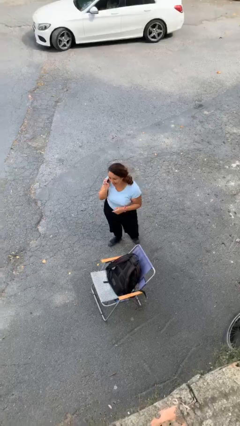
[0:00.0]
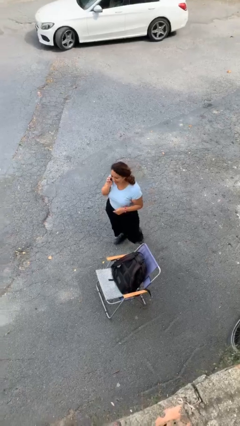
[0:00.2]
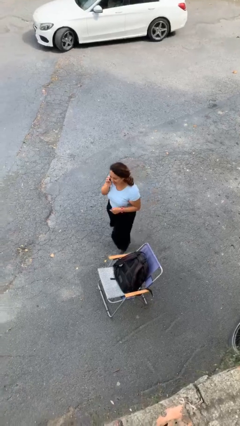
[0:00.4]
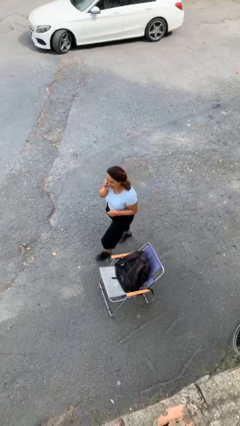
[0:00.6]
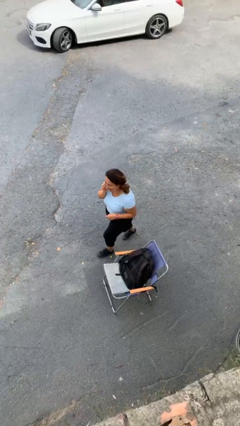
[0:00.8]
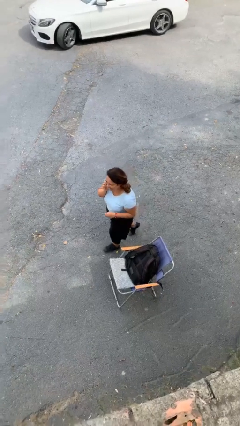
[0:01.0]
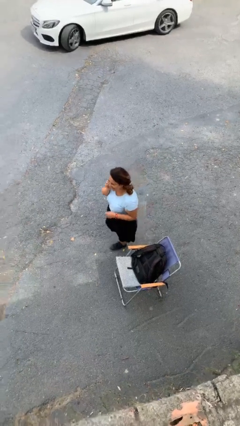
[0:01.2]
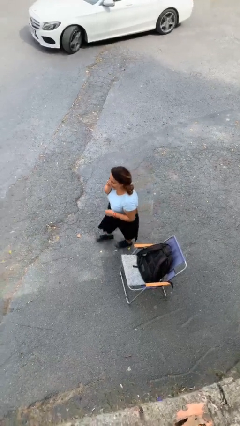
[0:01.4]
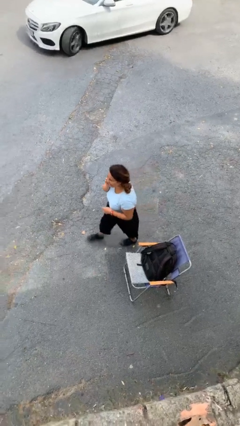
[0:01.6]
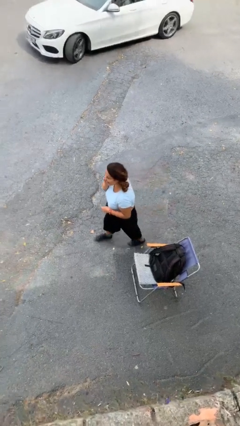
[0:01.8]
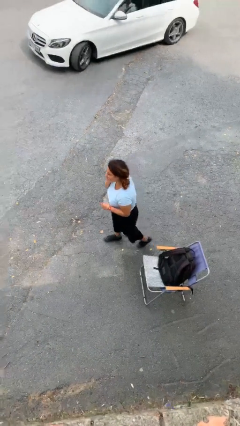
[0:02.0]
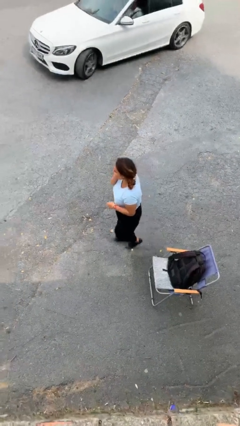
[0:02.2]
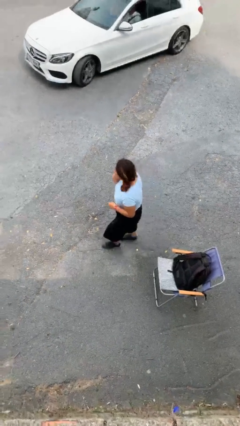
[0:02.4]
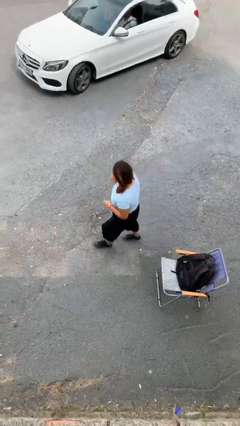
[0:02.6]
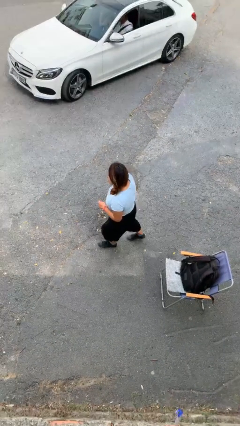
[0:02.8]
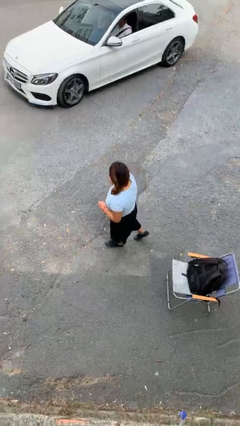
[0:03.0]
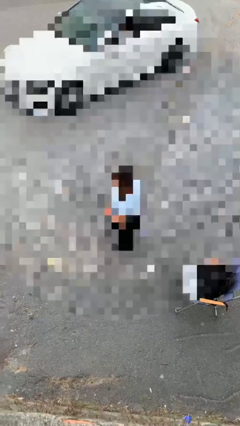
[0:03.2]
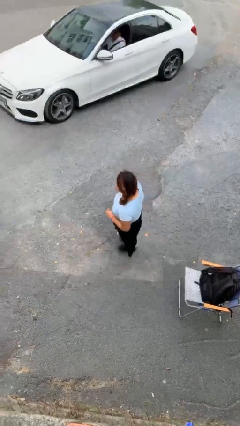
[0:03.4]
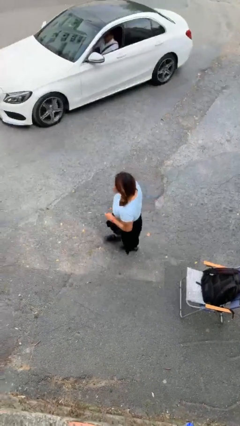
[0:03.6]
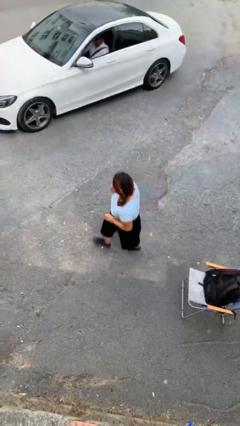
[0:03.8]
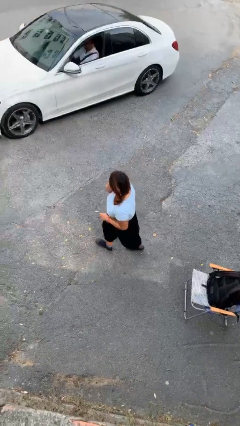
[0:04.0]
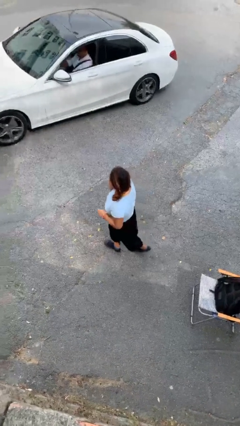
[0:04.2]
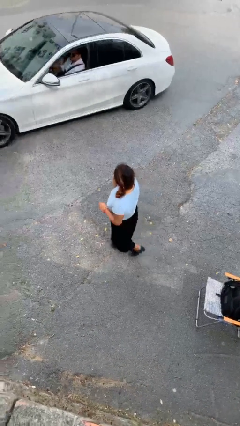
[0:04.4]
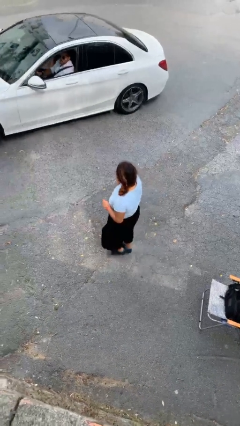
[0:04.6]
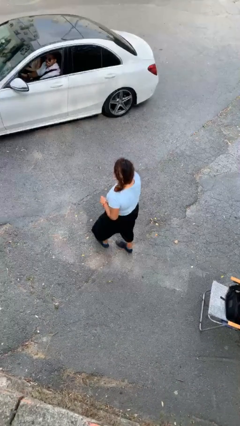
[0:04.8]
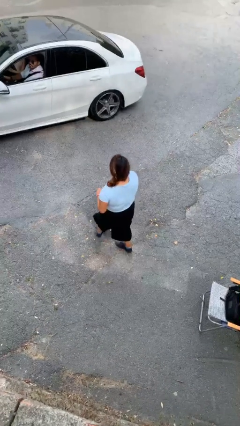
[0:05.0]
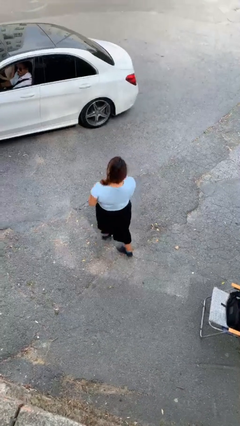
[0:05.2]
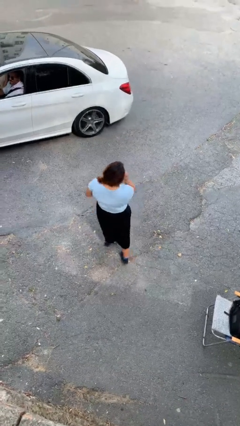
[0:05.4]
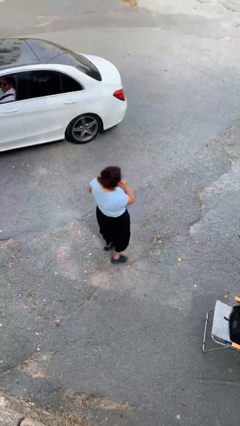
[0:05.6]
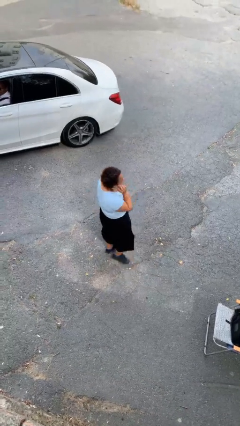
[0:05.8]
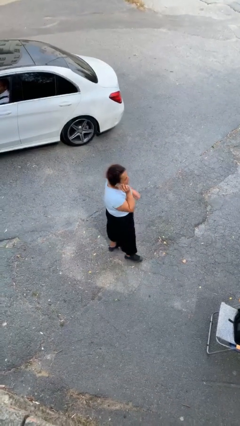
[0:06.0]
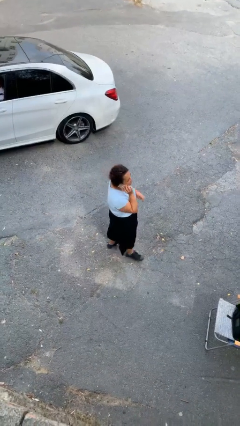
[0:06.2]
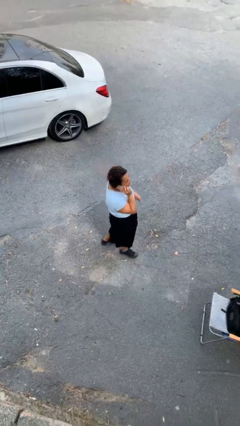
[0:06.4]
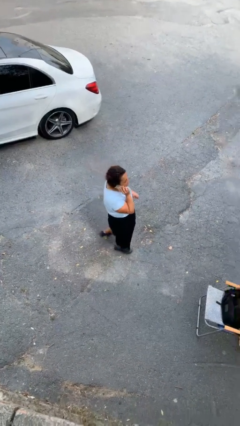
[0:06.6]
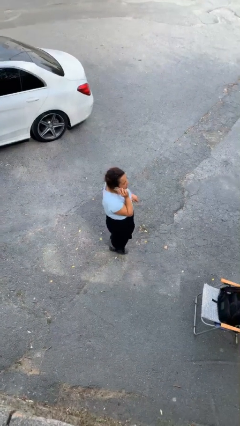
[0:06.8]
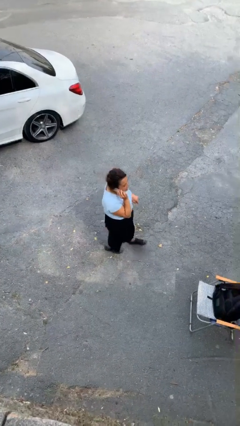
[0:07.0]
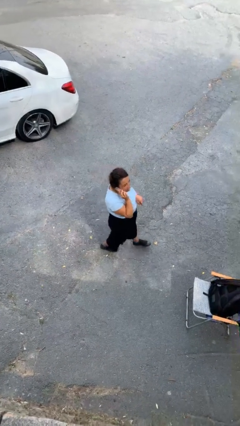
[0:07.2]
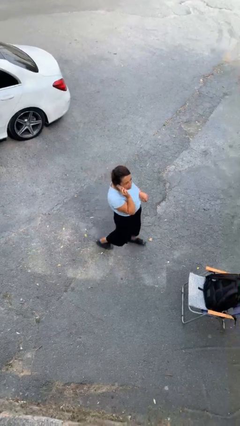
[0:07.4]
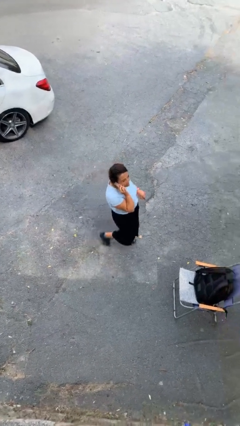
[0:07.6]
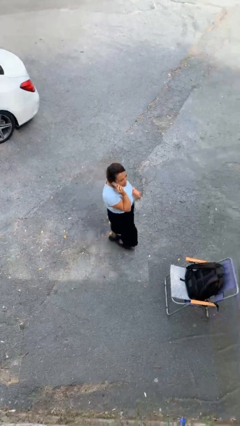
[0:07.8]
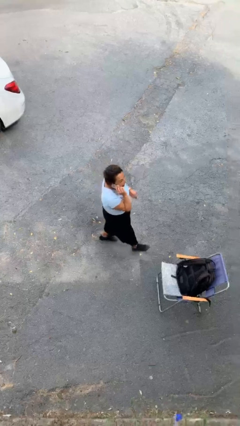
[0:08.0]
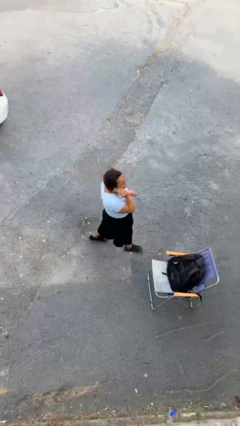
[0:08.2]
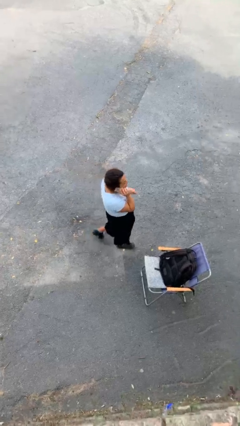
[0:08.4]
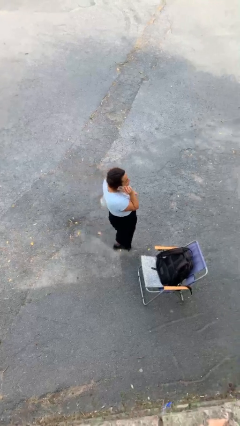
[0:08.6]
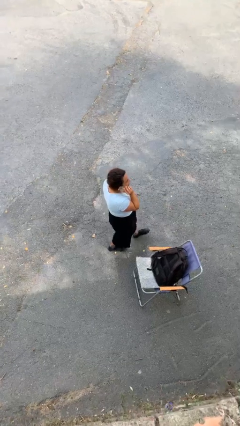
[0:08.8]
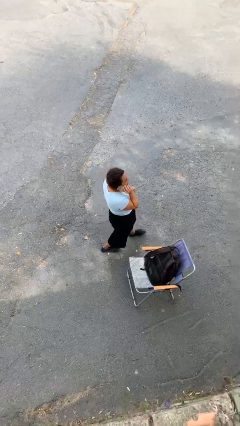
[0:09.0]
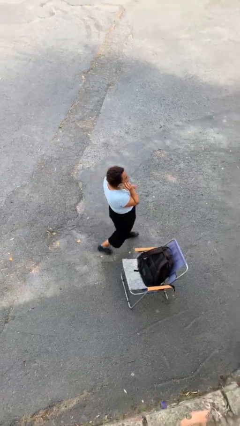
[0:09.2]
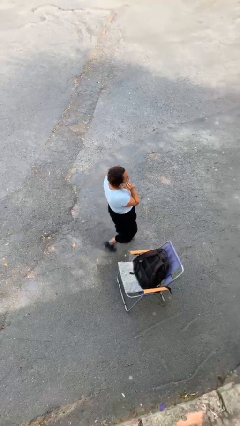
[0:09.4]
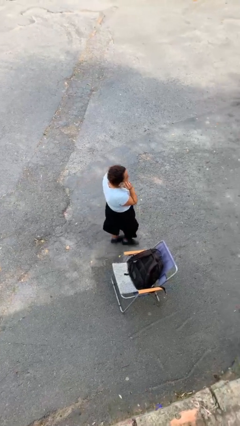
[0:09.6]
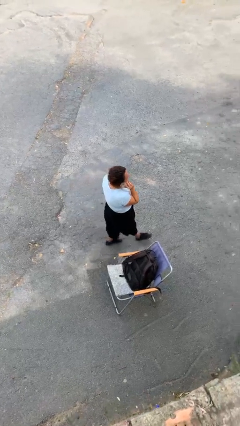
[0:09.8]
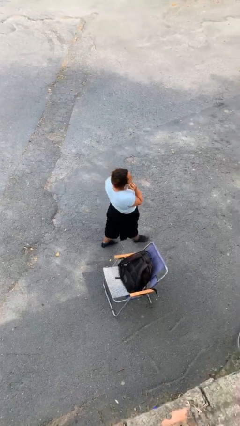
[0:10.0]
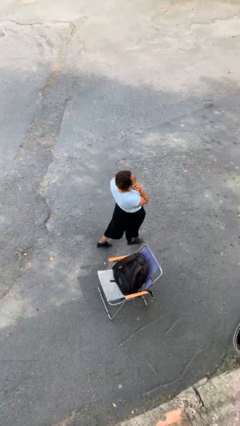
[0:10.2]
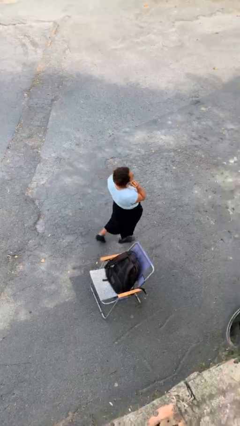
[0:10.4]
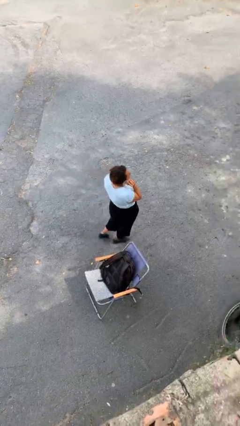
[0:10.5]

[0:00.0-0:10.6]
person talks on phone

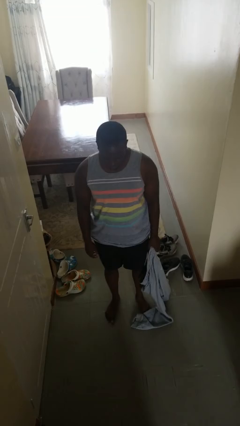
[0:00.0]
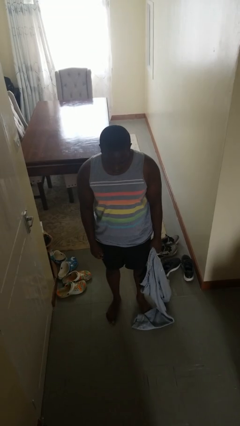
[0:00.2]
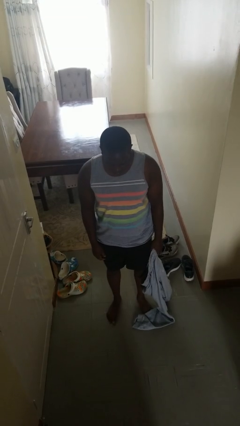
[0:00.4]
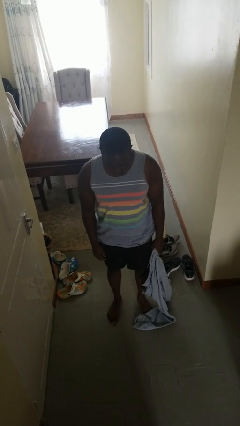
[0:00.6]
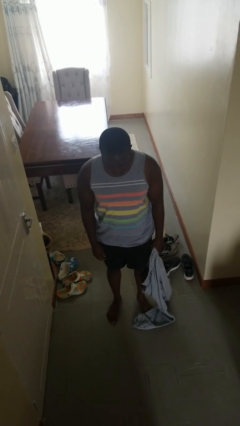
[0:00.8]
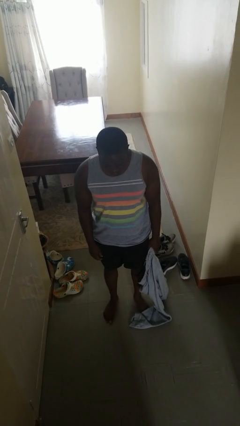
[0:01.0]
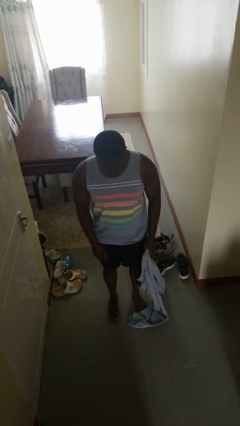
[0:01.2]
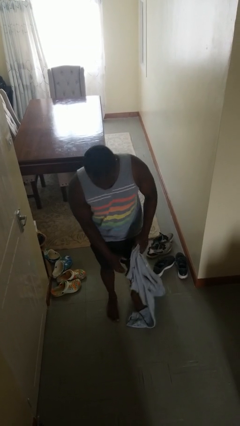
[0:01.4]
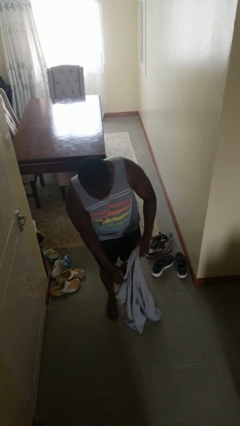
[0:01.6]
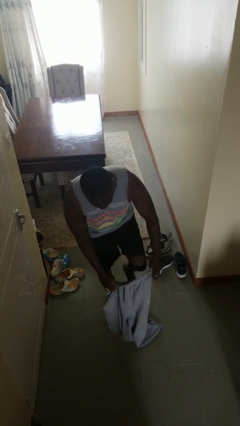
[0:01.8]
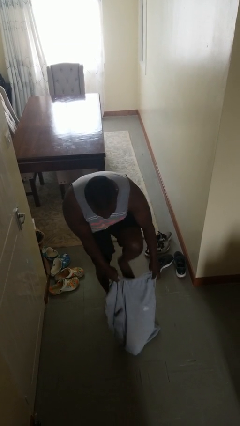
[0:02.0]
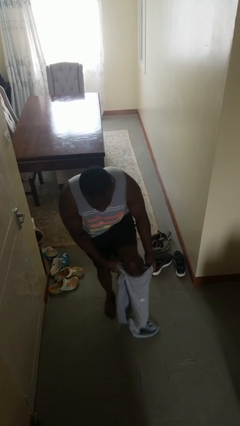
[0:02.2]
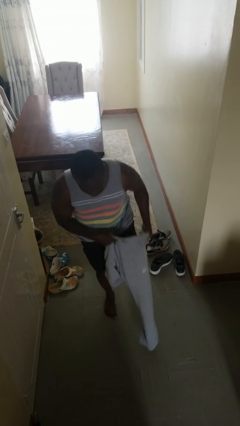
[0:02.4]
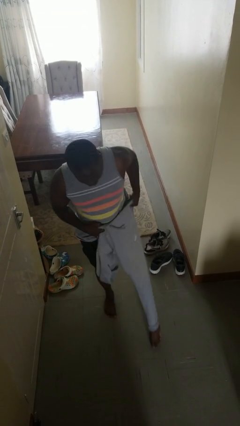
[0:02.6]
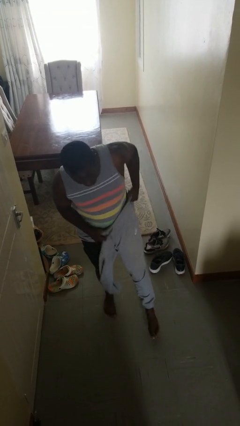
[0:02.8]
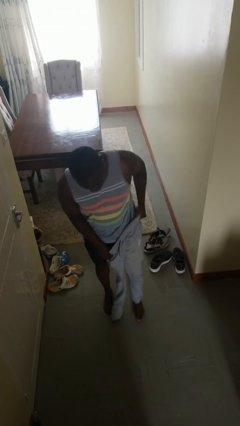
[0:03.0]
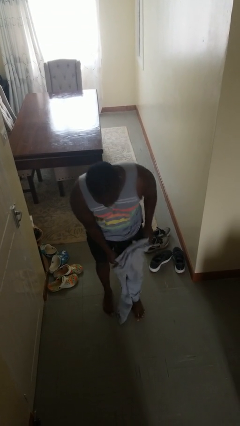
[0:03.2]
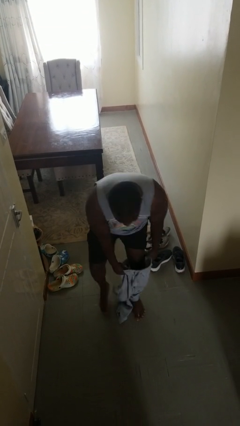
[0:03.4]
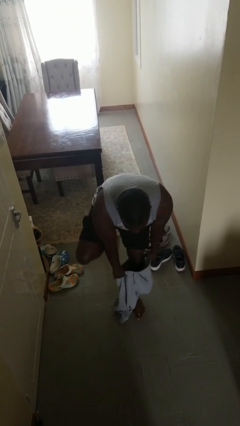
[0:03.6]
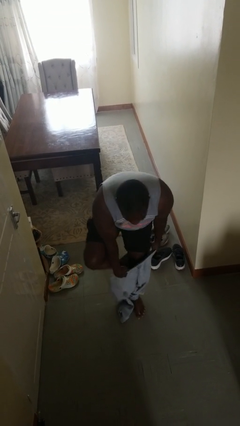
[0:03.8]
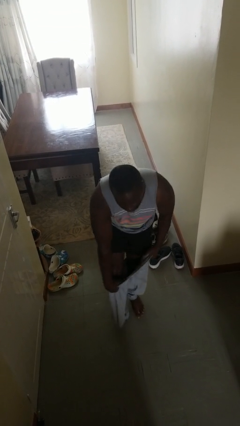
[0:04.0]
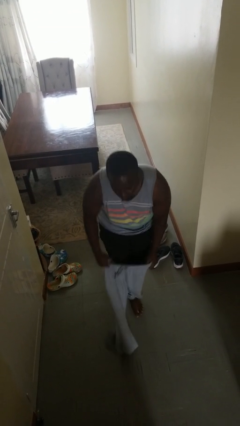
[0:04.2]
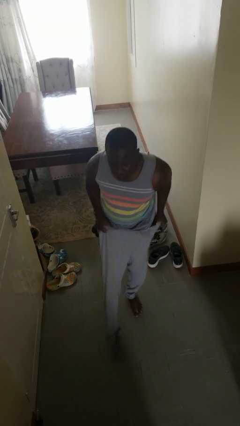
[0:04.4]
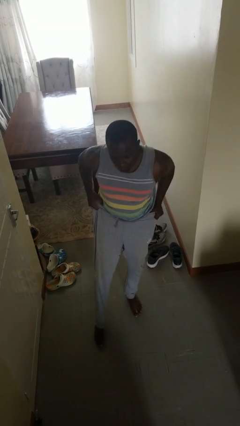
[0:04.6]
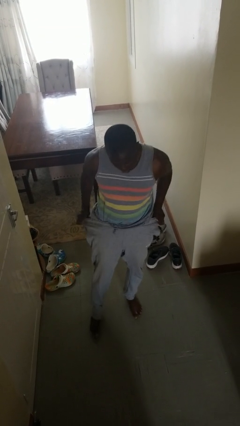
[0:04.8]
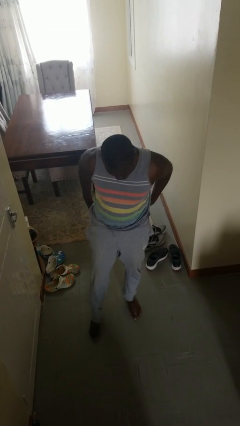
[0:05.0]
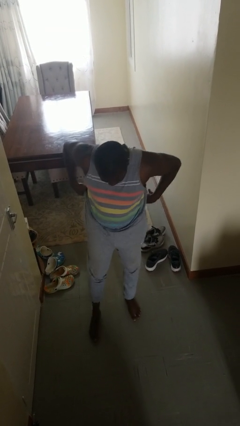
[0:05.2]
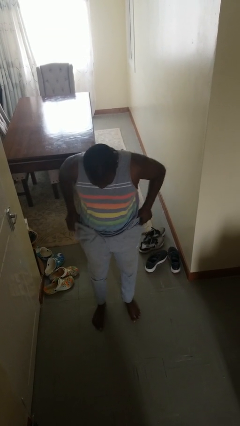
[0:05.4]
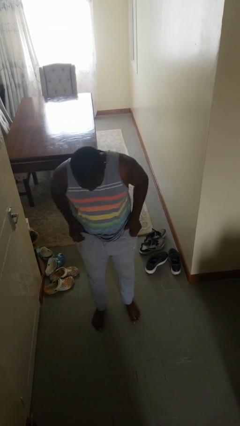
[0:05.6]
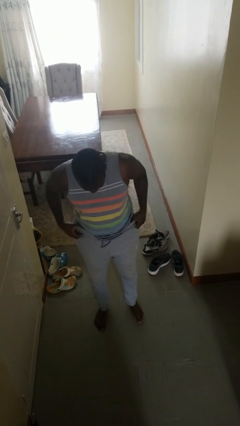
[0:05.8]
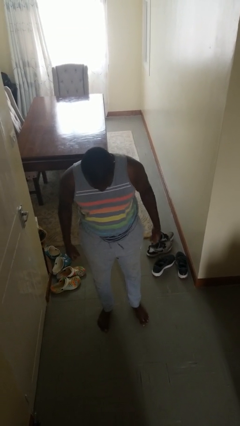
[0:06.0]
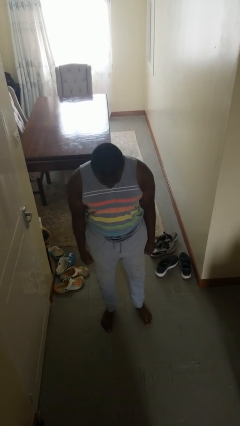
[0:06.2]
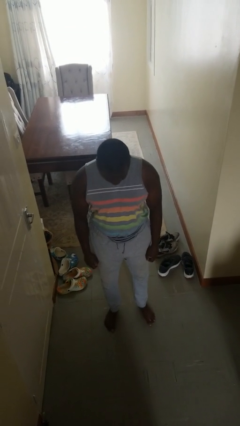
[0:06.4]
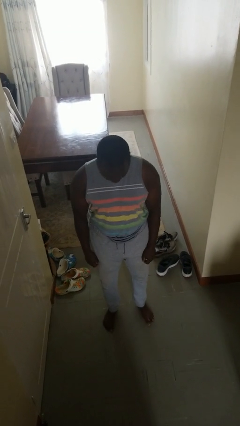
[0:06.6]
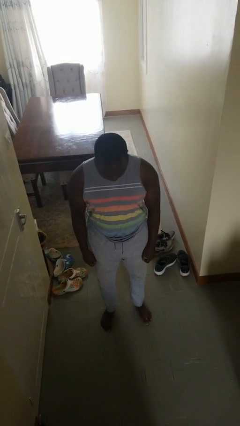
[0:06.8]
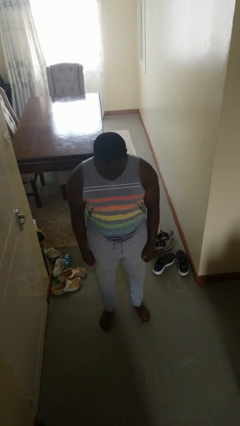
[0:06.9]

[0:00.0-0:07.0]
person puts on pants

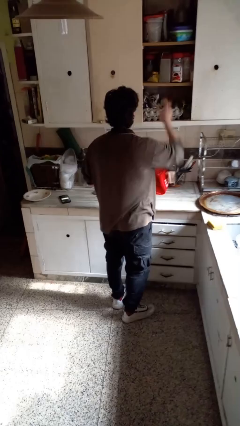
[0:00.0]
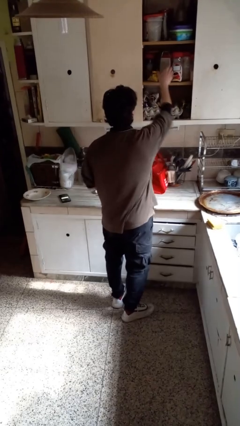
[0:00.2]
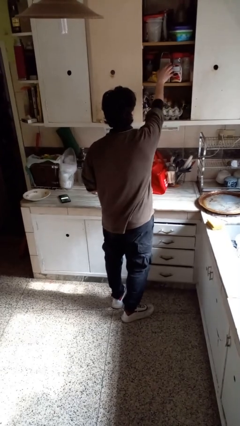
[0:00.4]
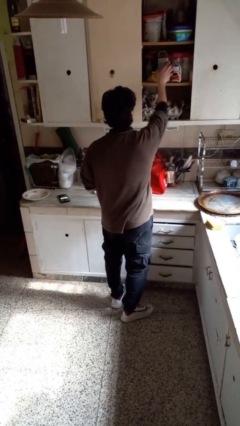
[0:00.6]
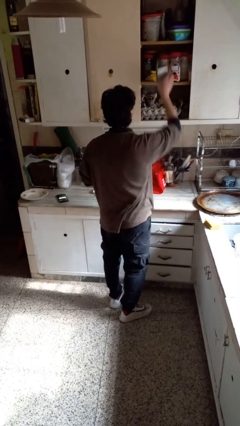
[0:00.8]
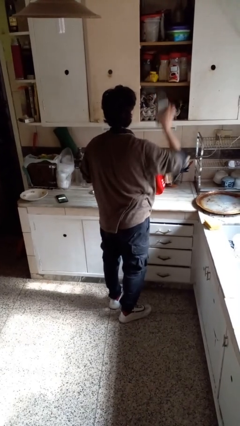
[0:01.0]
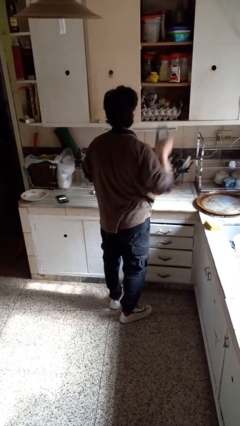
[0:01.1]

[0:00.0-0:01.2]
person puts down object into cabinet
